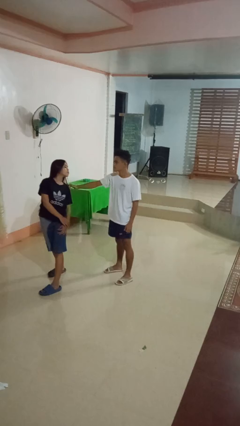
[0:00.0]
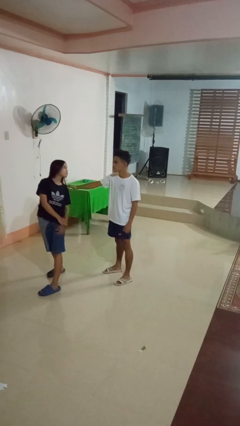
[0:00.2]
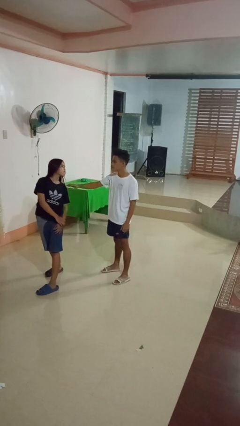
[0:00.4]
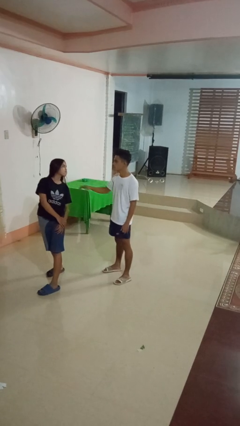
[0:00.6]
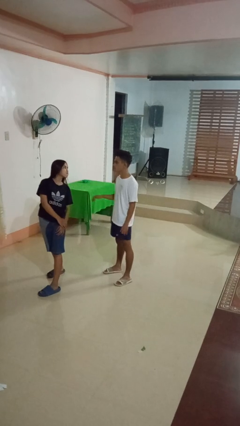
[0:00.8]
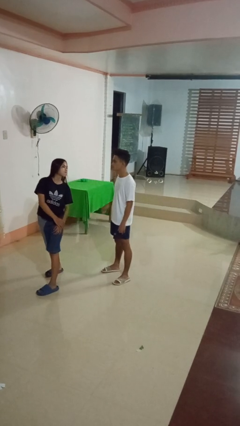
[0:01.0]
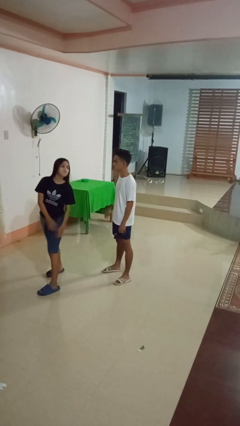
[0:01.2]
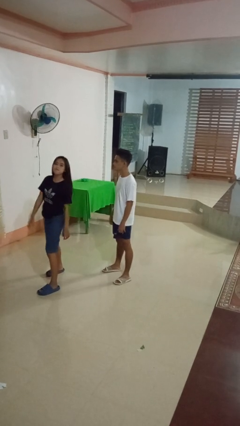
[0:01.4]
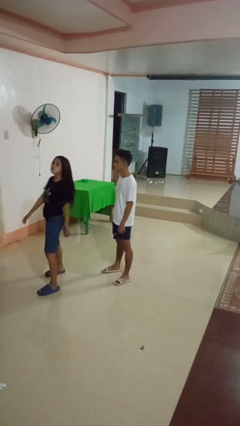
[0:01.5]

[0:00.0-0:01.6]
person spins person around

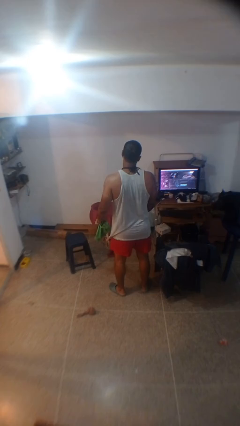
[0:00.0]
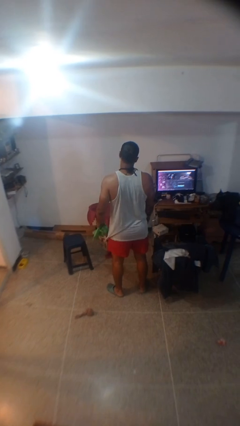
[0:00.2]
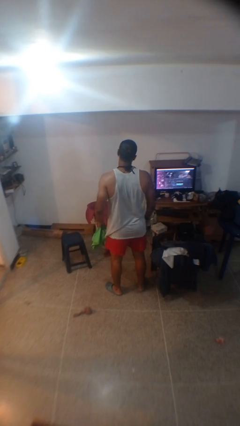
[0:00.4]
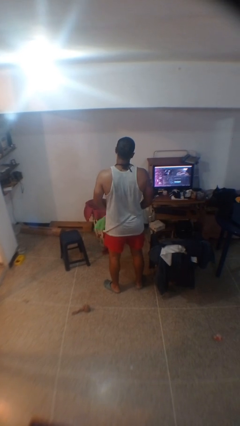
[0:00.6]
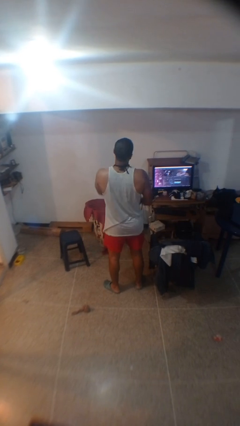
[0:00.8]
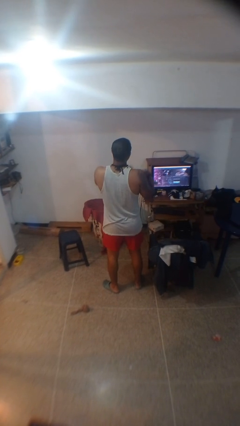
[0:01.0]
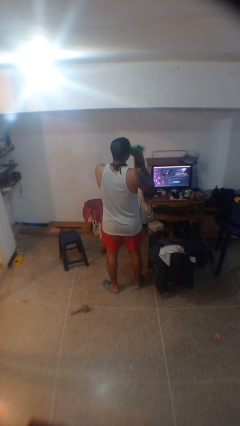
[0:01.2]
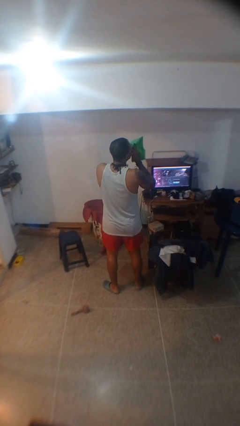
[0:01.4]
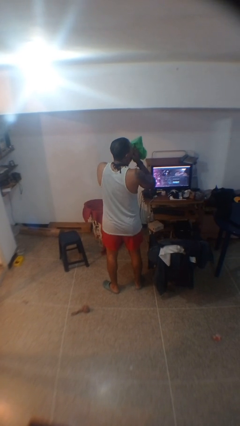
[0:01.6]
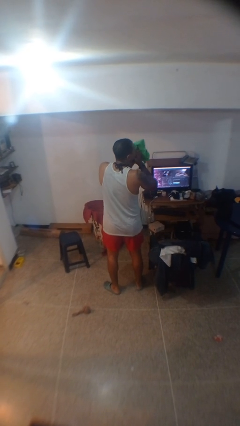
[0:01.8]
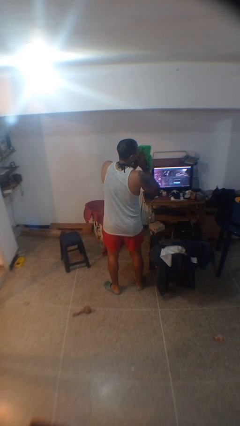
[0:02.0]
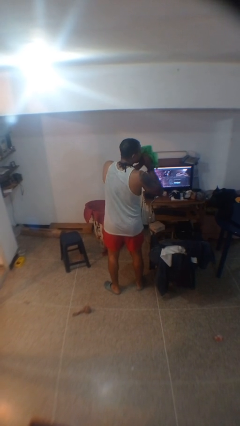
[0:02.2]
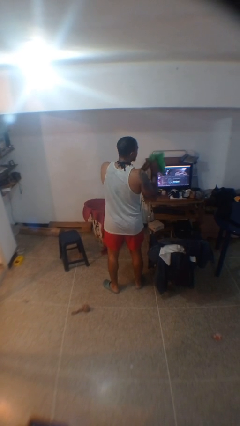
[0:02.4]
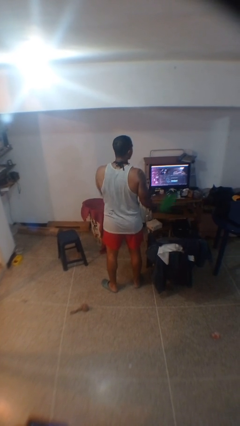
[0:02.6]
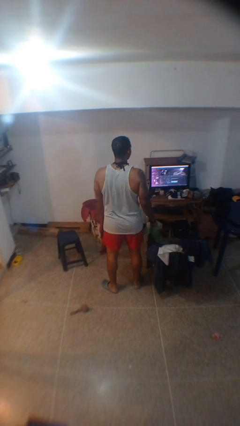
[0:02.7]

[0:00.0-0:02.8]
person blows nose

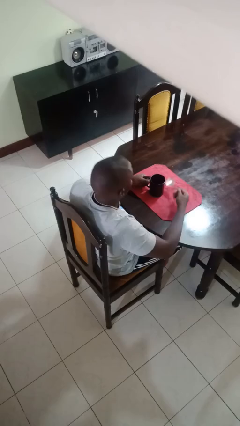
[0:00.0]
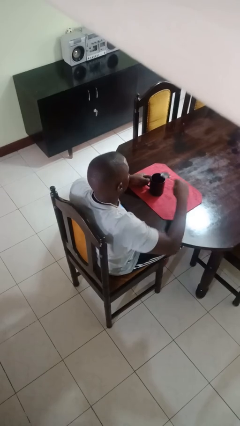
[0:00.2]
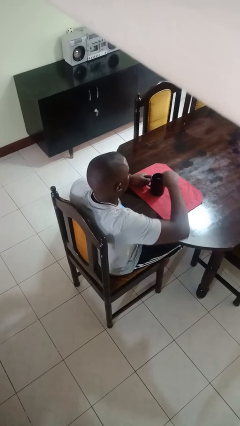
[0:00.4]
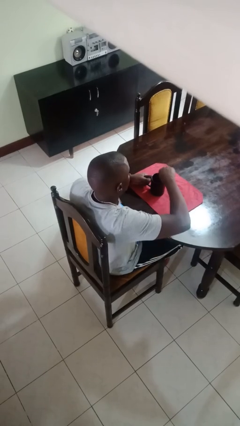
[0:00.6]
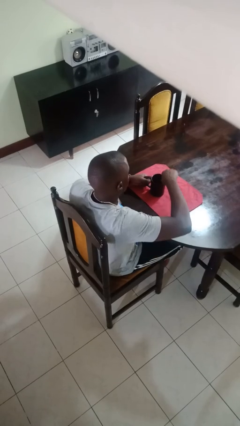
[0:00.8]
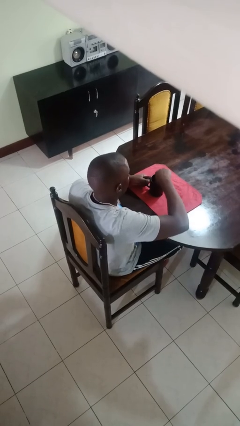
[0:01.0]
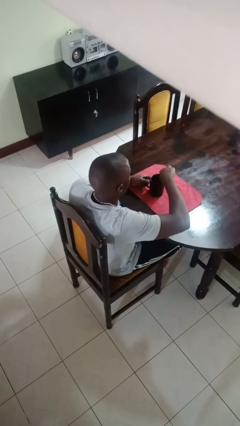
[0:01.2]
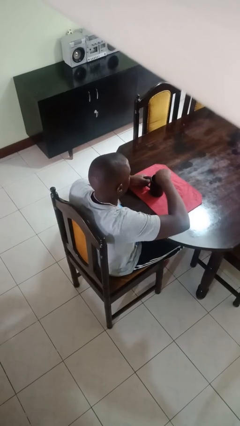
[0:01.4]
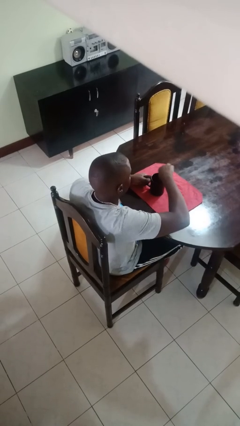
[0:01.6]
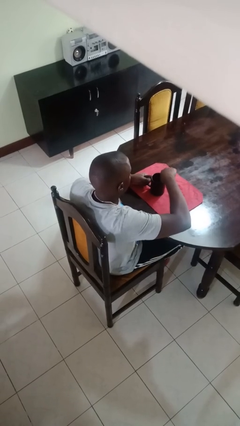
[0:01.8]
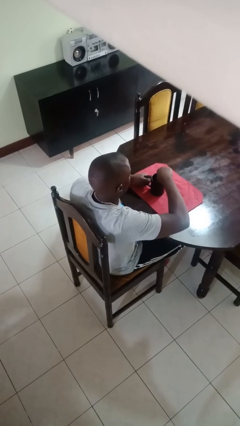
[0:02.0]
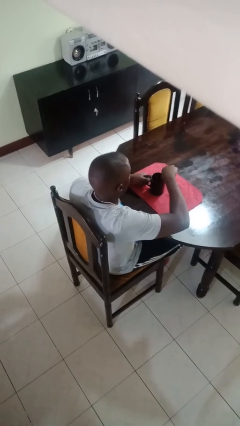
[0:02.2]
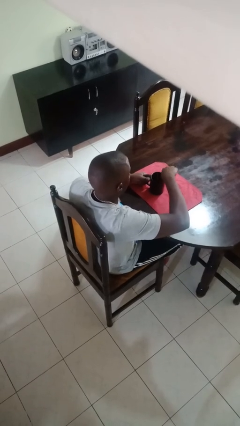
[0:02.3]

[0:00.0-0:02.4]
person stirs mug

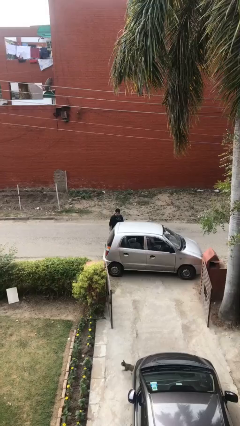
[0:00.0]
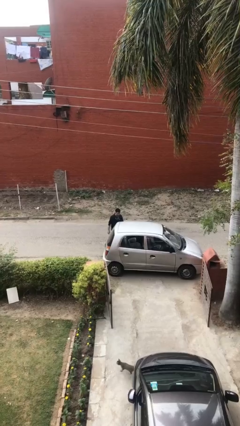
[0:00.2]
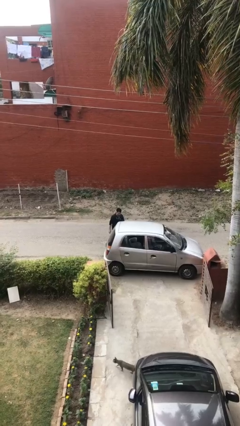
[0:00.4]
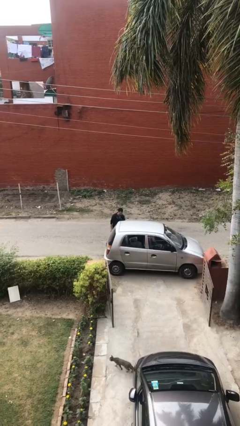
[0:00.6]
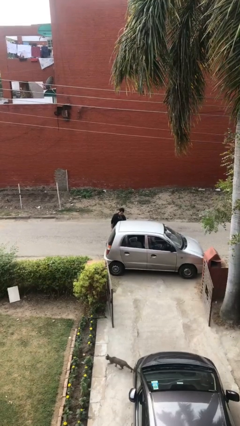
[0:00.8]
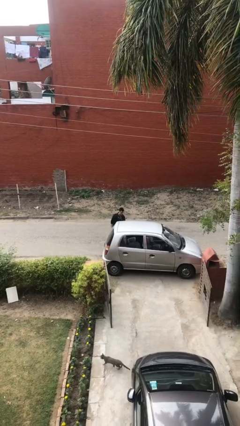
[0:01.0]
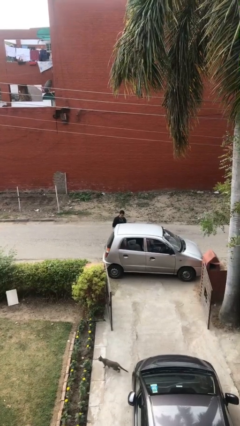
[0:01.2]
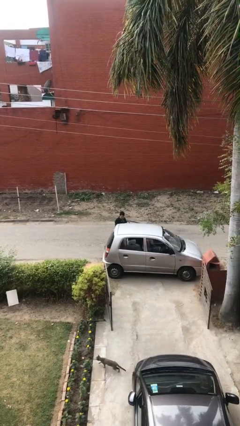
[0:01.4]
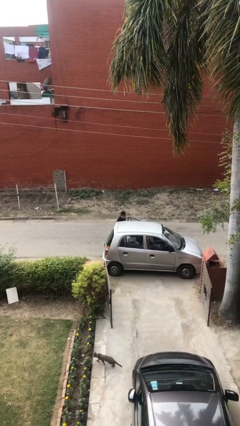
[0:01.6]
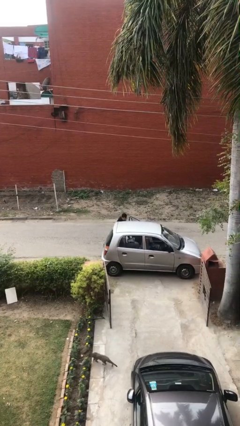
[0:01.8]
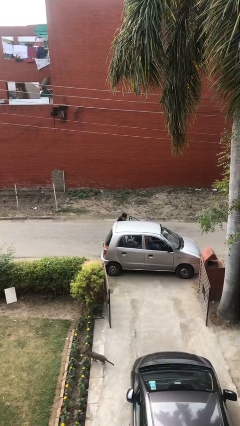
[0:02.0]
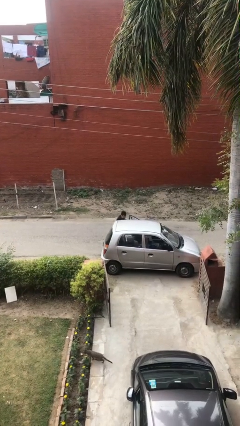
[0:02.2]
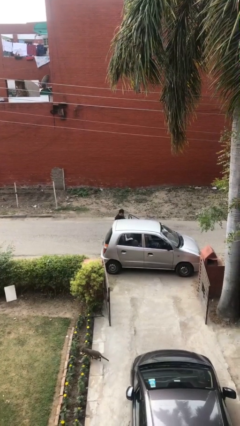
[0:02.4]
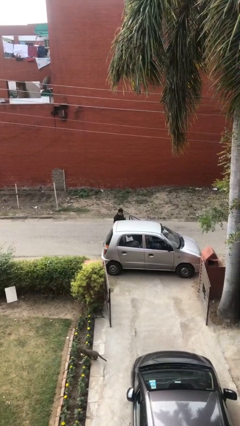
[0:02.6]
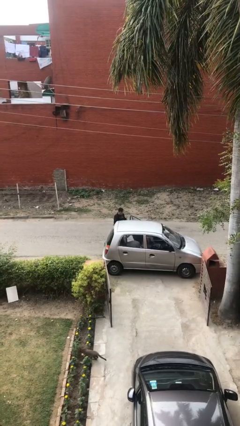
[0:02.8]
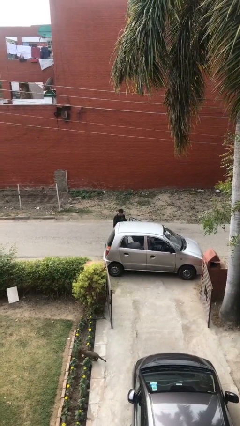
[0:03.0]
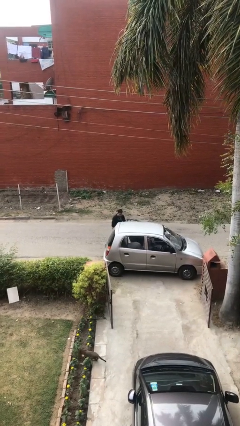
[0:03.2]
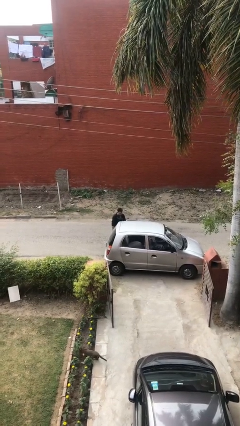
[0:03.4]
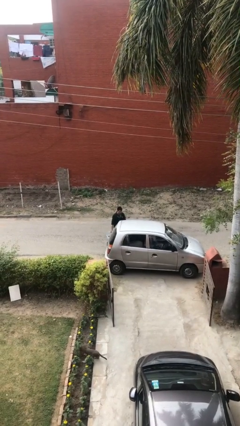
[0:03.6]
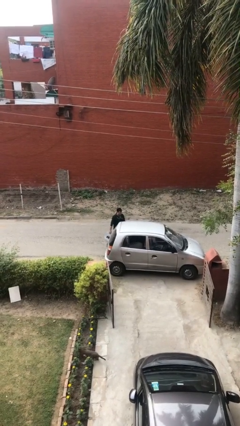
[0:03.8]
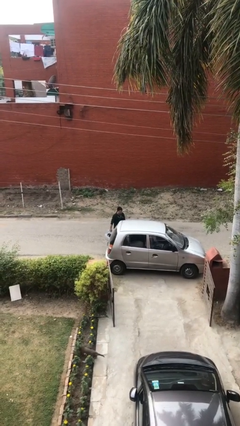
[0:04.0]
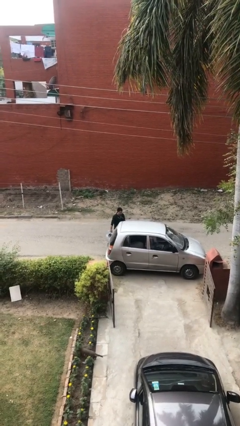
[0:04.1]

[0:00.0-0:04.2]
person unloads car

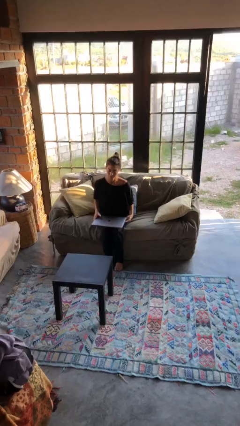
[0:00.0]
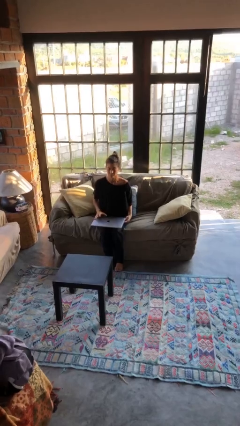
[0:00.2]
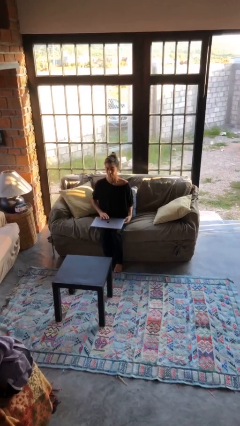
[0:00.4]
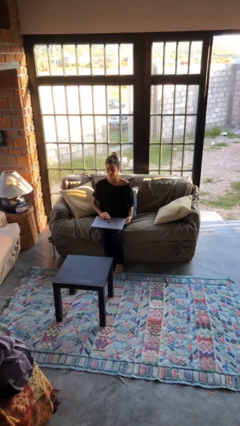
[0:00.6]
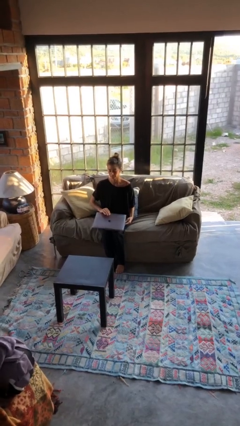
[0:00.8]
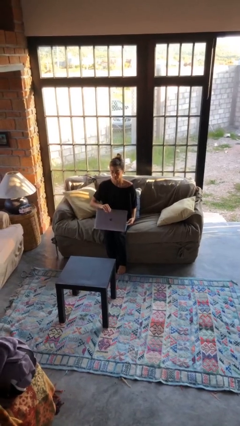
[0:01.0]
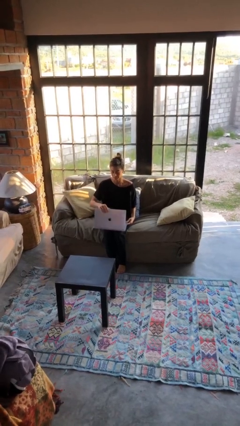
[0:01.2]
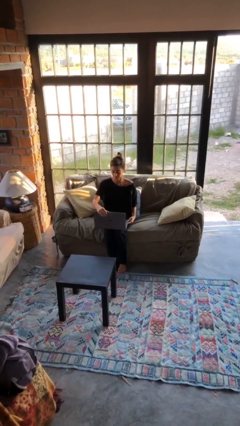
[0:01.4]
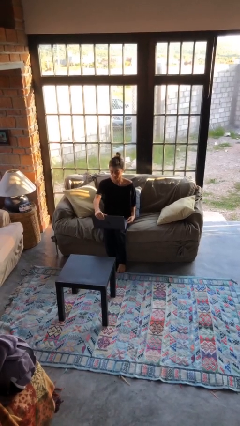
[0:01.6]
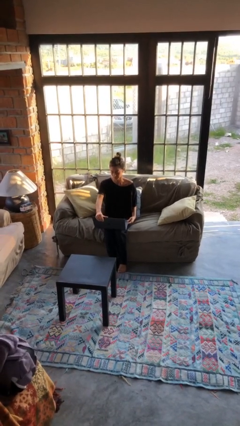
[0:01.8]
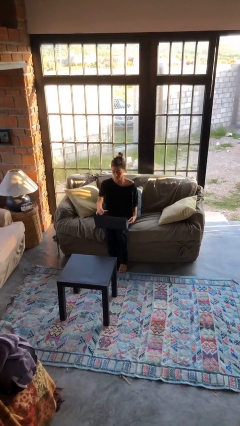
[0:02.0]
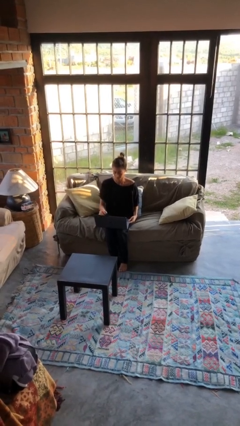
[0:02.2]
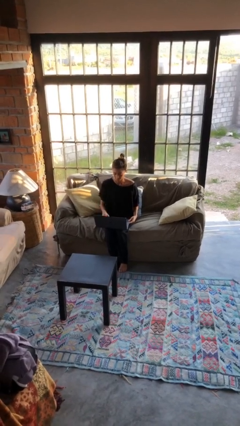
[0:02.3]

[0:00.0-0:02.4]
person opens laptop

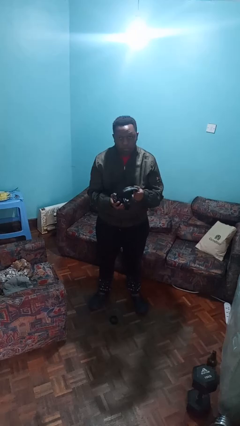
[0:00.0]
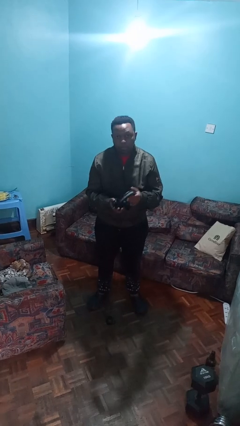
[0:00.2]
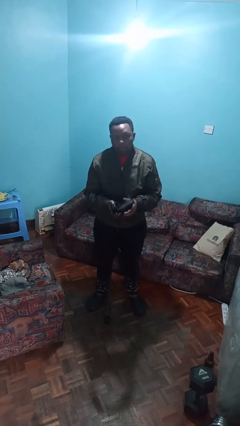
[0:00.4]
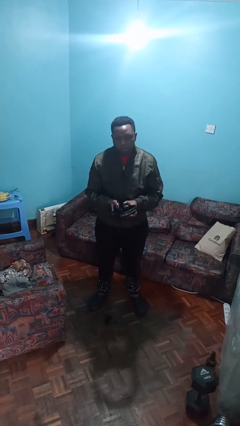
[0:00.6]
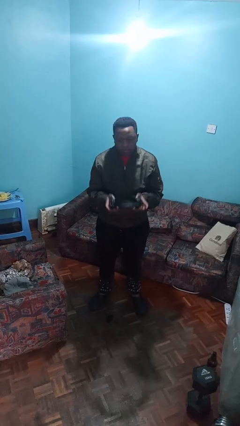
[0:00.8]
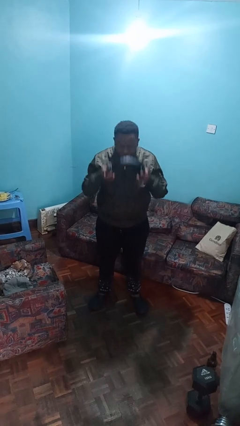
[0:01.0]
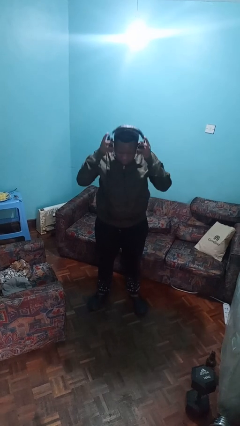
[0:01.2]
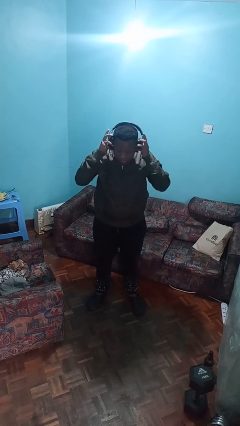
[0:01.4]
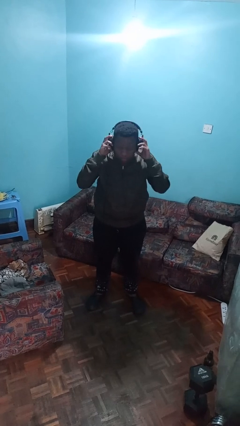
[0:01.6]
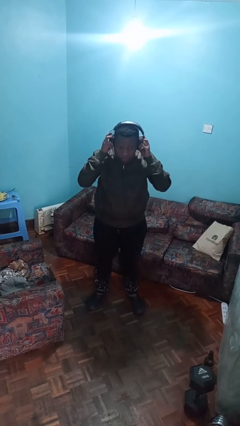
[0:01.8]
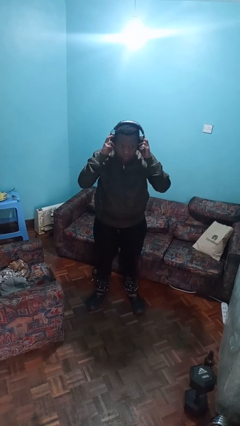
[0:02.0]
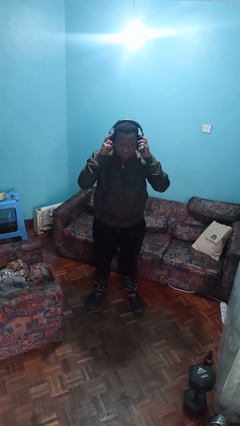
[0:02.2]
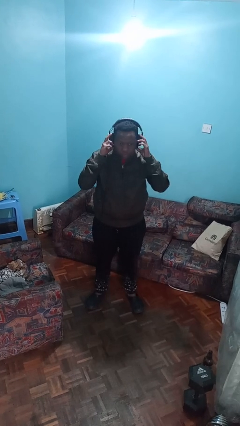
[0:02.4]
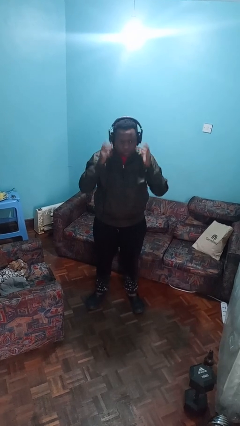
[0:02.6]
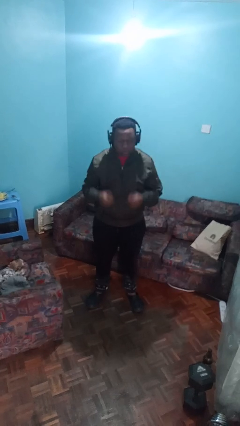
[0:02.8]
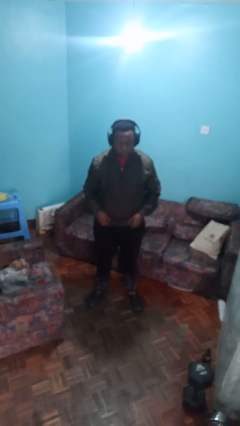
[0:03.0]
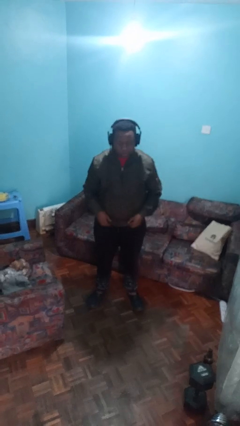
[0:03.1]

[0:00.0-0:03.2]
person puts on headphones

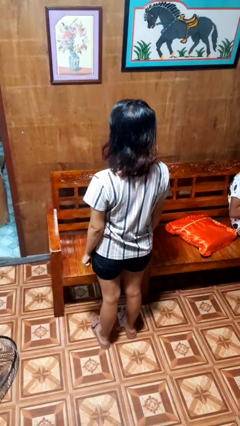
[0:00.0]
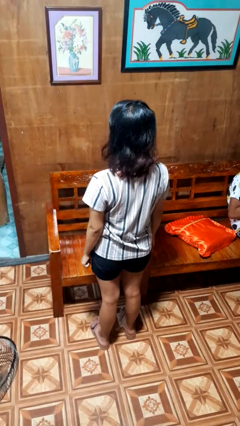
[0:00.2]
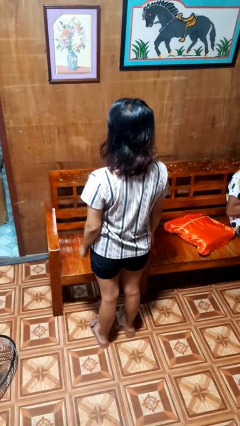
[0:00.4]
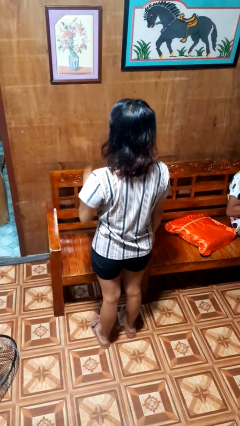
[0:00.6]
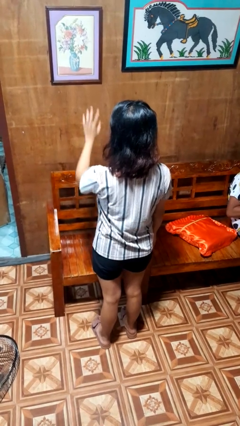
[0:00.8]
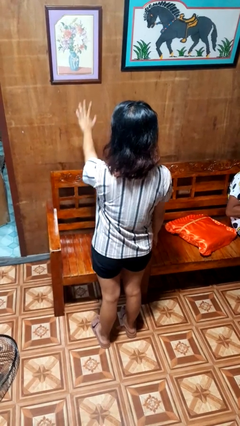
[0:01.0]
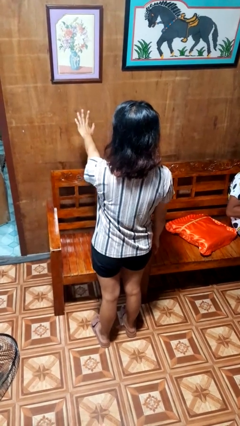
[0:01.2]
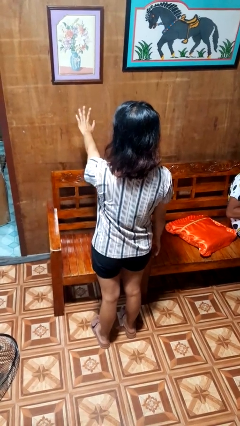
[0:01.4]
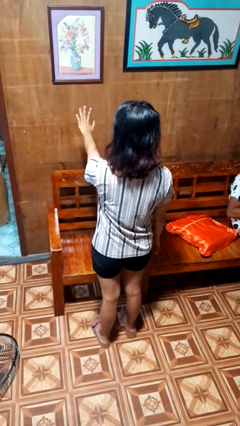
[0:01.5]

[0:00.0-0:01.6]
person gestures stop
